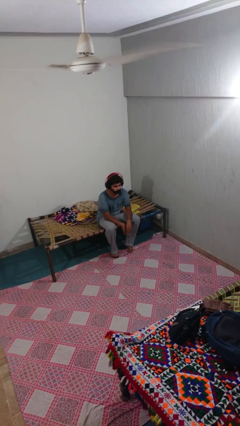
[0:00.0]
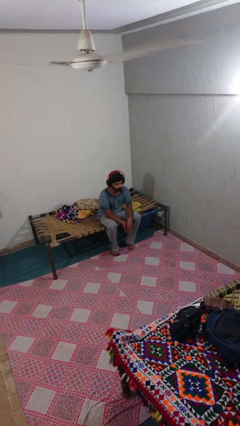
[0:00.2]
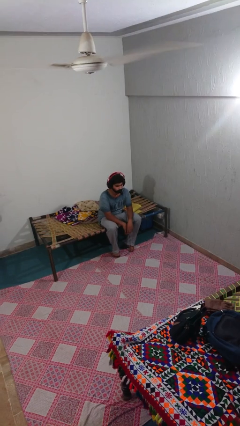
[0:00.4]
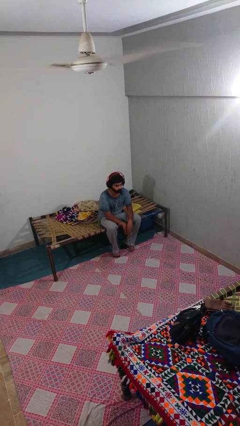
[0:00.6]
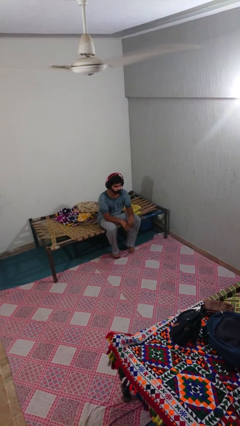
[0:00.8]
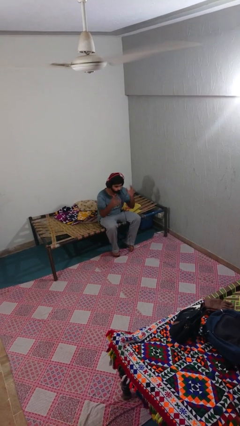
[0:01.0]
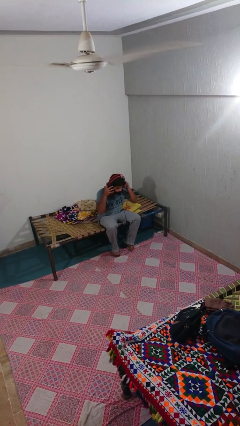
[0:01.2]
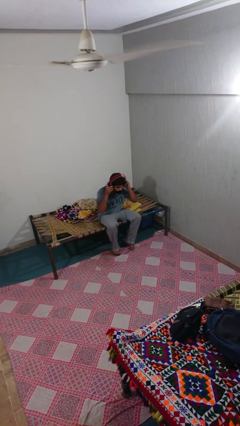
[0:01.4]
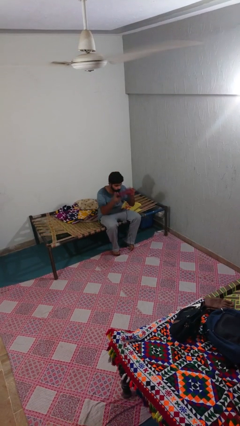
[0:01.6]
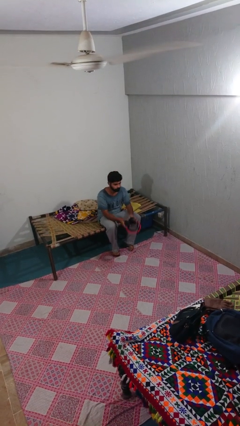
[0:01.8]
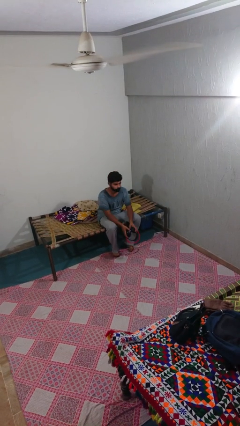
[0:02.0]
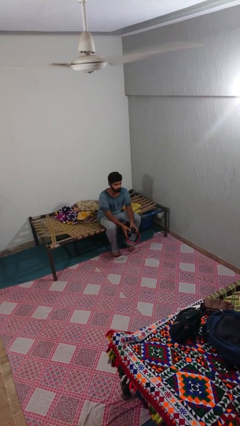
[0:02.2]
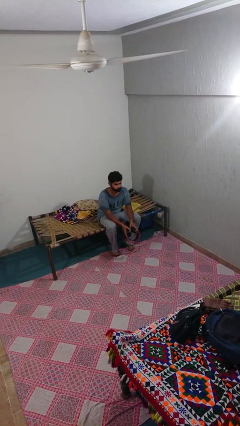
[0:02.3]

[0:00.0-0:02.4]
person takes off headphones

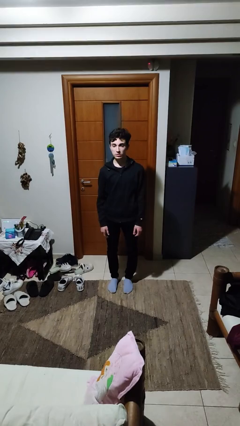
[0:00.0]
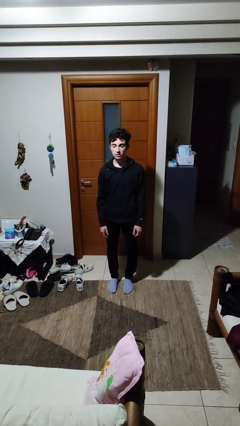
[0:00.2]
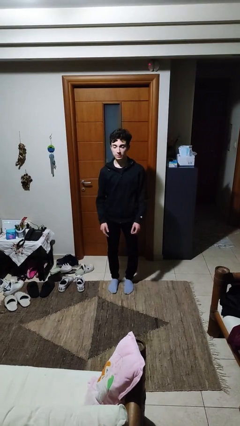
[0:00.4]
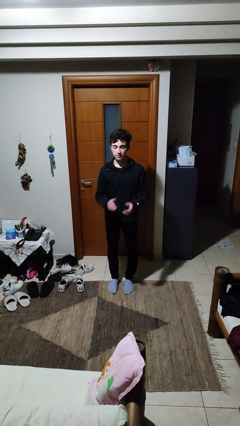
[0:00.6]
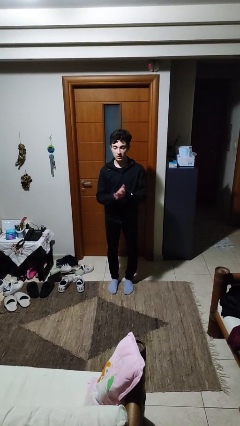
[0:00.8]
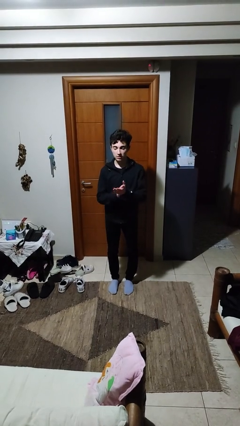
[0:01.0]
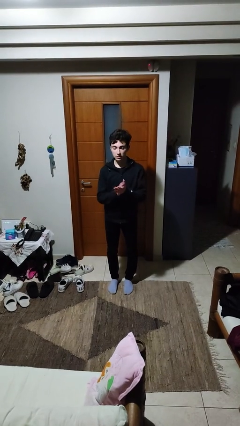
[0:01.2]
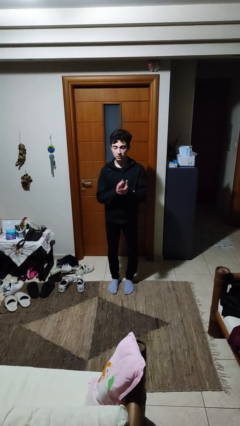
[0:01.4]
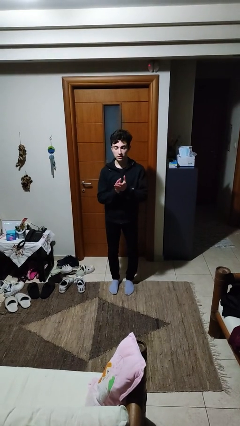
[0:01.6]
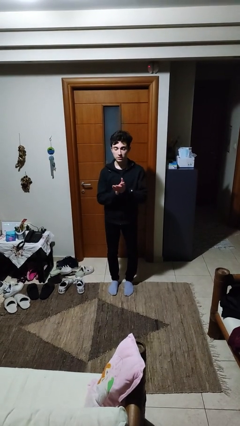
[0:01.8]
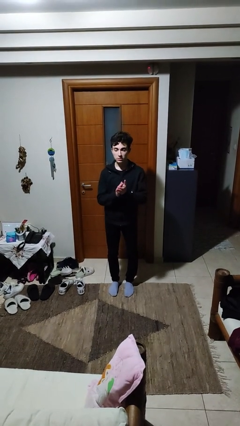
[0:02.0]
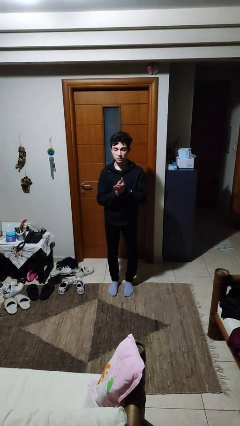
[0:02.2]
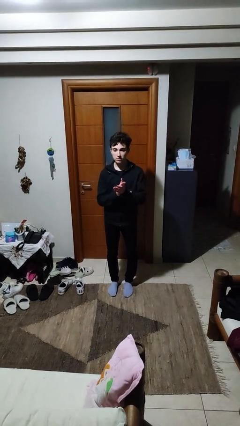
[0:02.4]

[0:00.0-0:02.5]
person claps hands

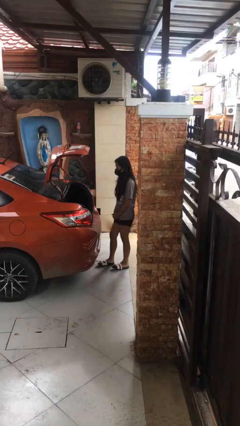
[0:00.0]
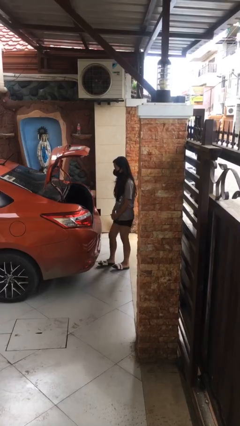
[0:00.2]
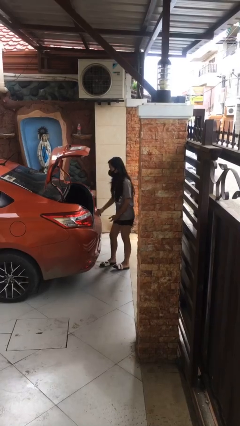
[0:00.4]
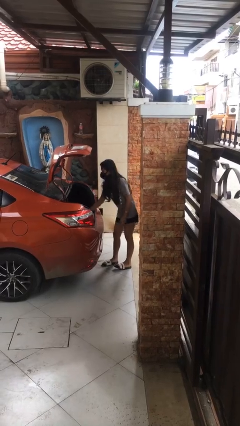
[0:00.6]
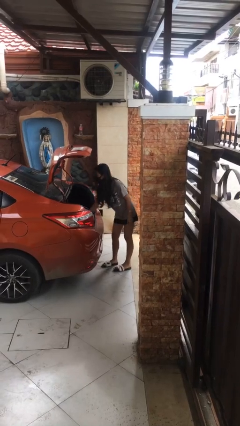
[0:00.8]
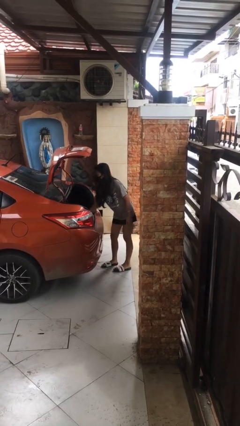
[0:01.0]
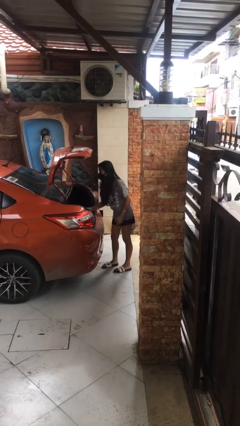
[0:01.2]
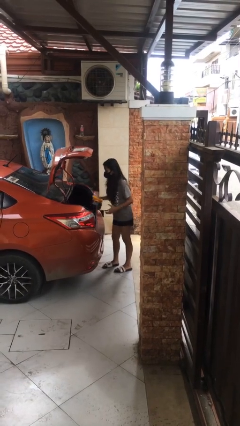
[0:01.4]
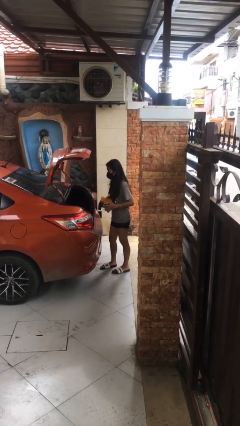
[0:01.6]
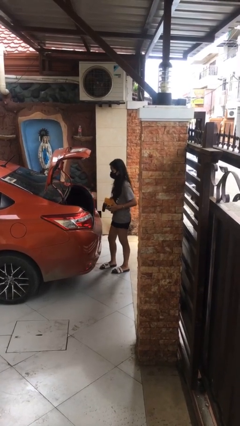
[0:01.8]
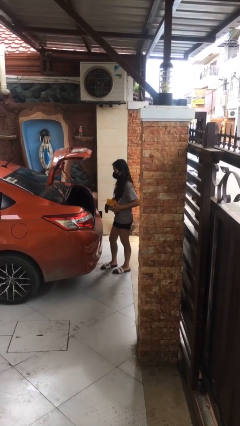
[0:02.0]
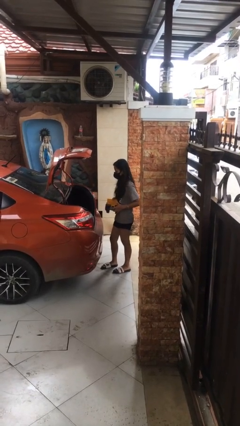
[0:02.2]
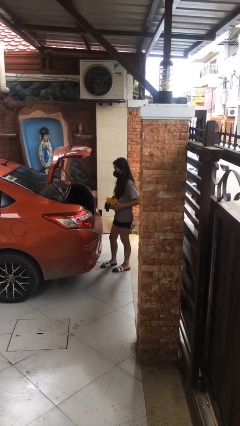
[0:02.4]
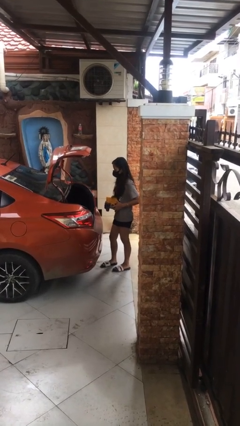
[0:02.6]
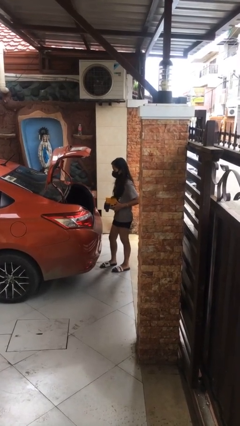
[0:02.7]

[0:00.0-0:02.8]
person unloads car

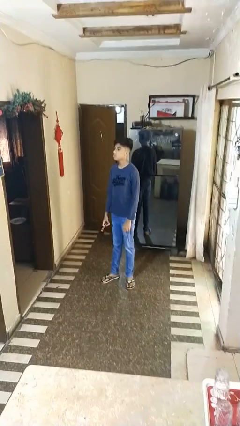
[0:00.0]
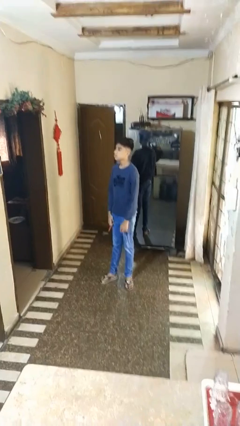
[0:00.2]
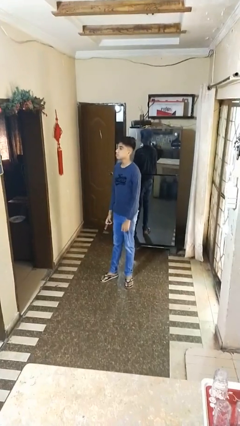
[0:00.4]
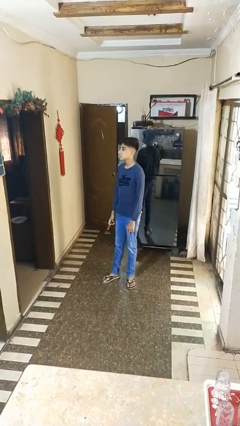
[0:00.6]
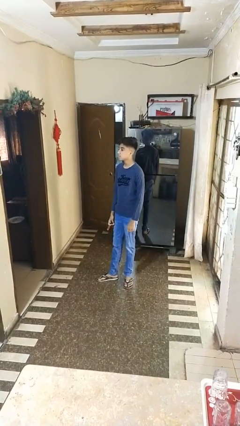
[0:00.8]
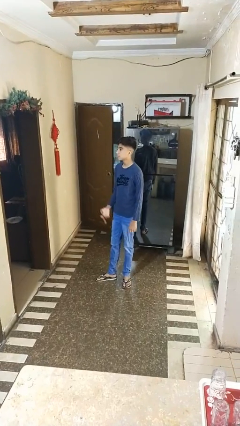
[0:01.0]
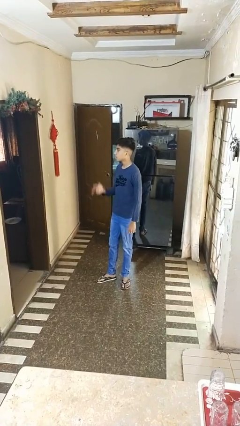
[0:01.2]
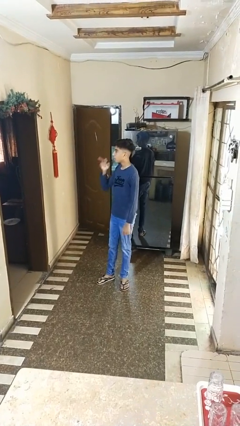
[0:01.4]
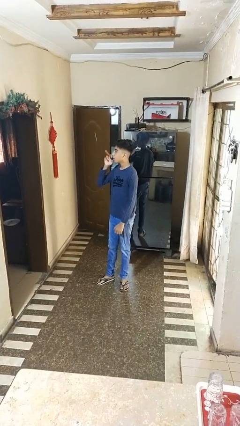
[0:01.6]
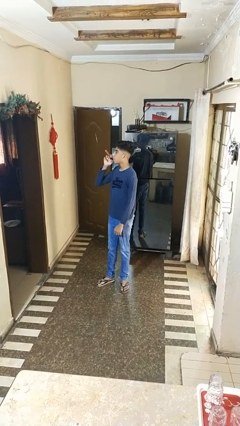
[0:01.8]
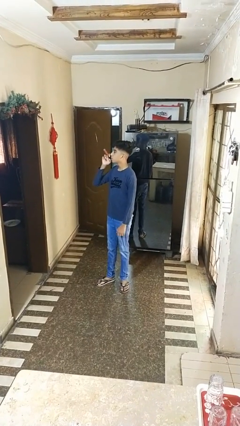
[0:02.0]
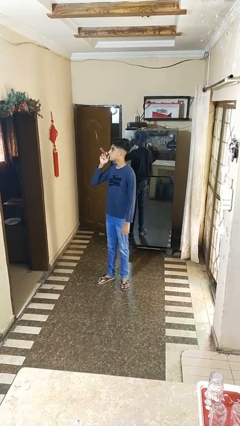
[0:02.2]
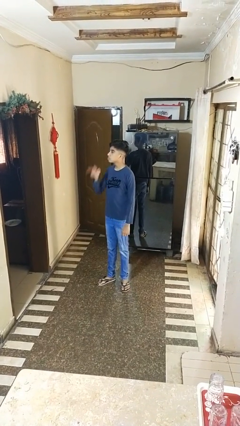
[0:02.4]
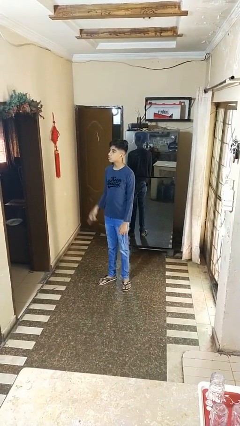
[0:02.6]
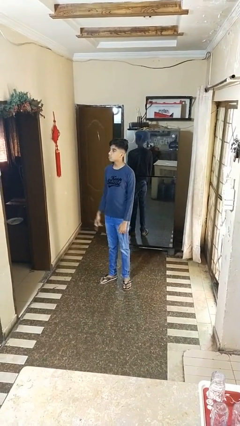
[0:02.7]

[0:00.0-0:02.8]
person vapes

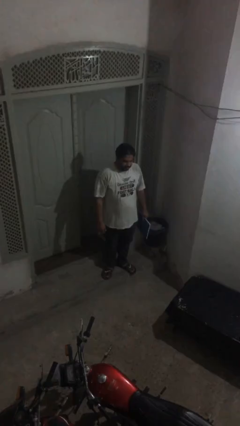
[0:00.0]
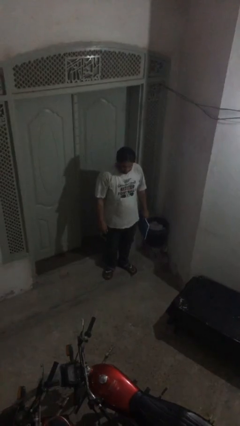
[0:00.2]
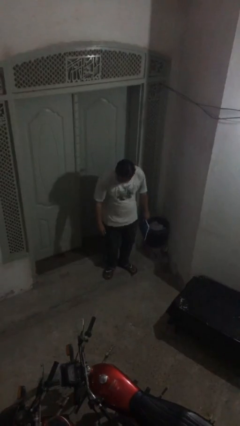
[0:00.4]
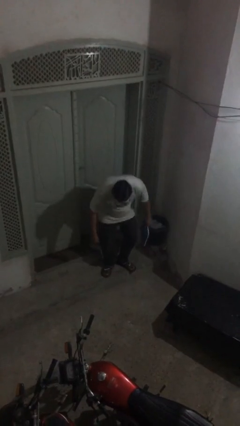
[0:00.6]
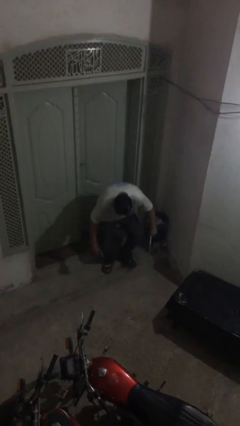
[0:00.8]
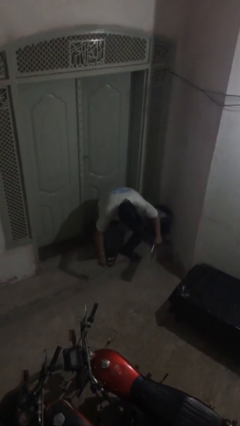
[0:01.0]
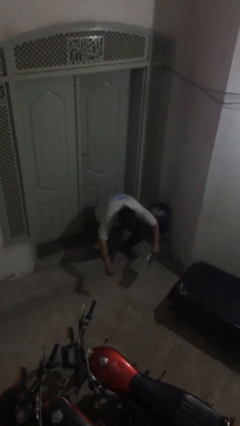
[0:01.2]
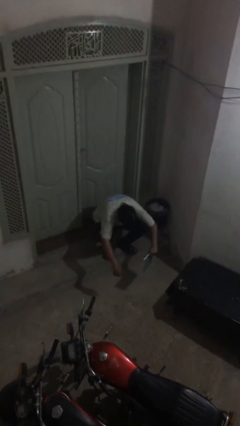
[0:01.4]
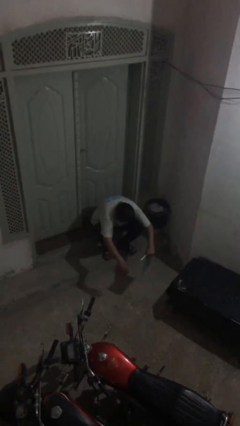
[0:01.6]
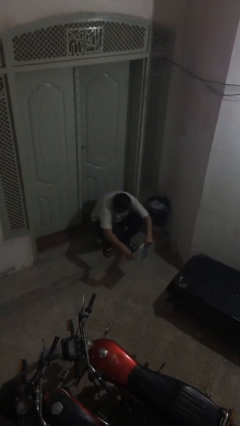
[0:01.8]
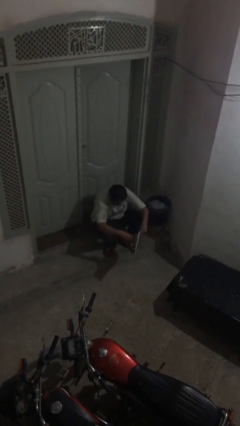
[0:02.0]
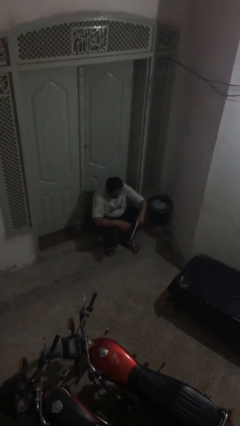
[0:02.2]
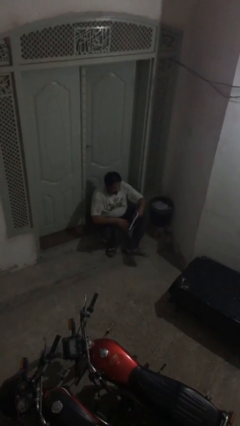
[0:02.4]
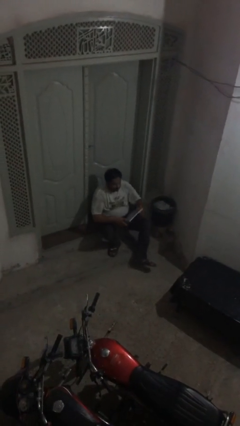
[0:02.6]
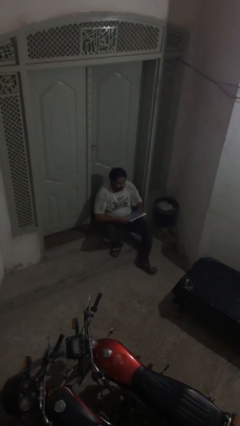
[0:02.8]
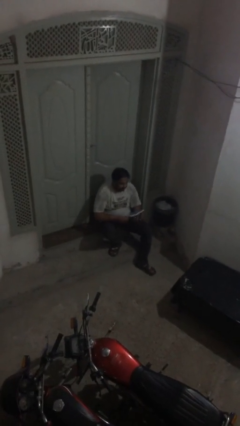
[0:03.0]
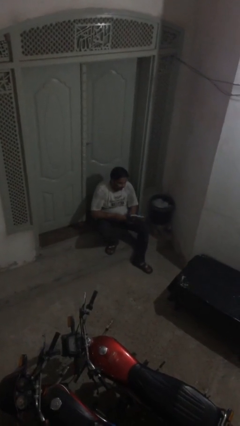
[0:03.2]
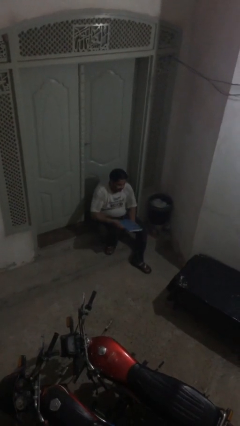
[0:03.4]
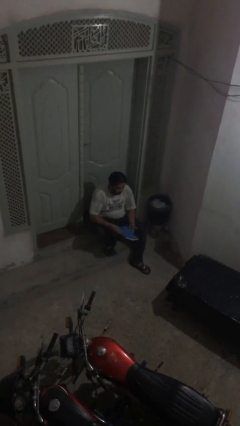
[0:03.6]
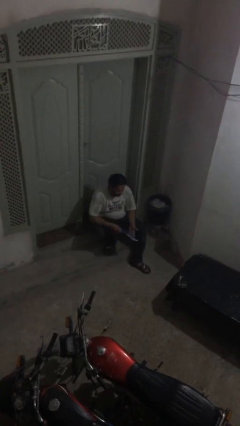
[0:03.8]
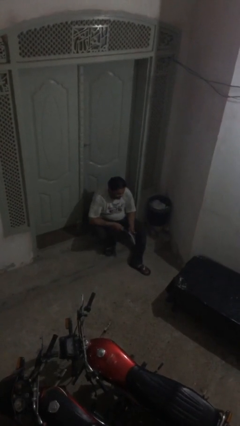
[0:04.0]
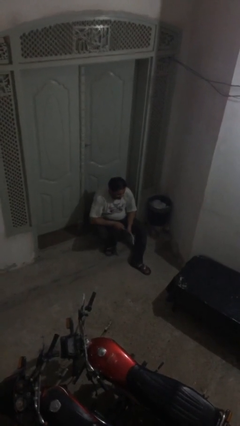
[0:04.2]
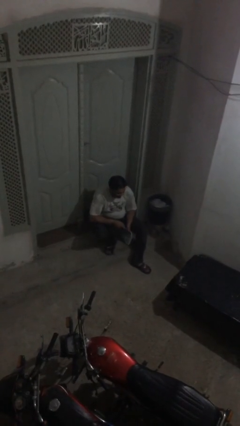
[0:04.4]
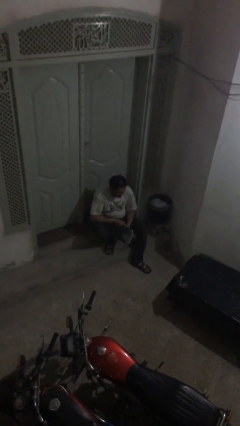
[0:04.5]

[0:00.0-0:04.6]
person sits down

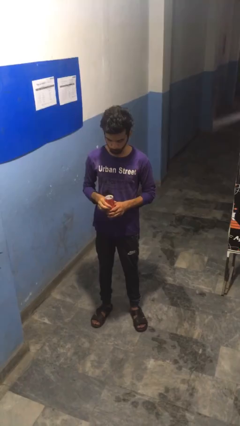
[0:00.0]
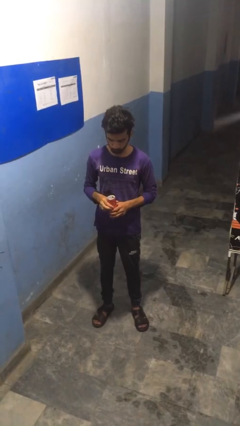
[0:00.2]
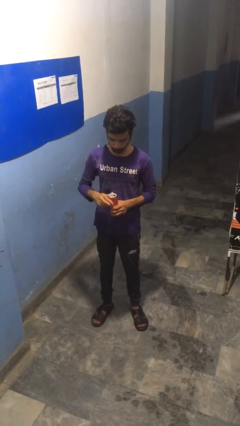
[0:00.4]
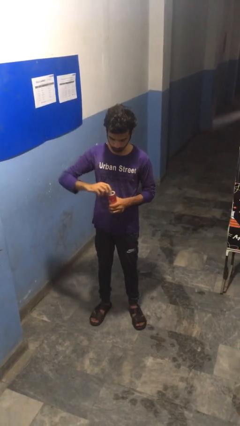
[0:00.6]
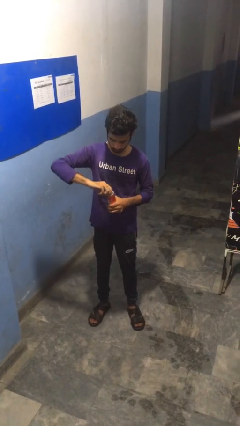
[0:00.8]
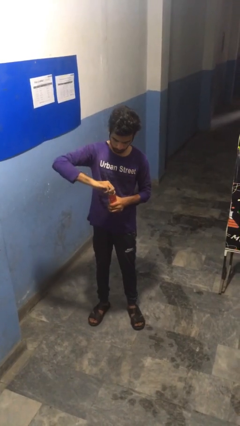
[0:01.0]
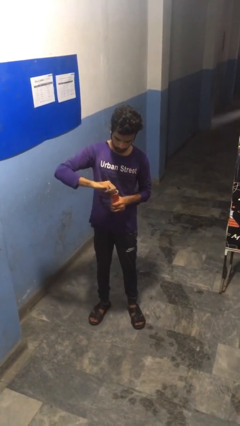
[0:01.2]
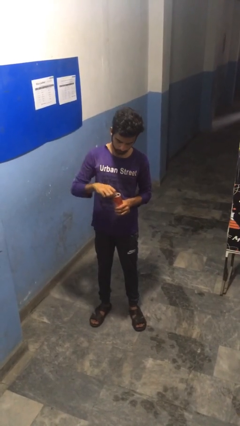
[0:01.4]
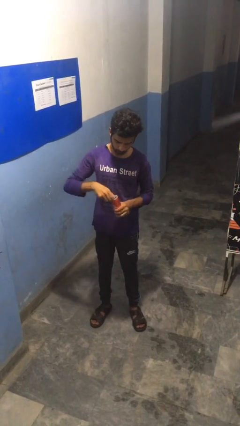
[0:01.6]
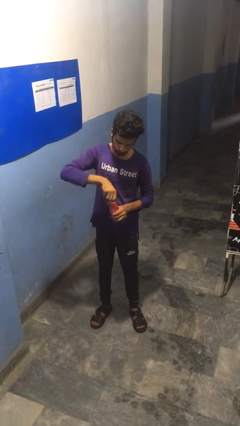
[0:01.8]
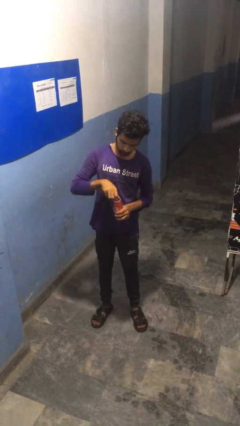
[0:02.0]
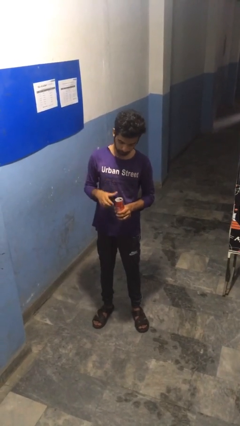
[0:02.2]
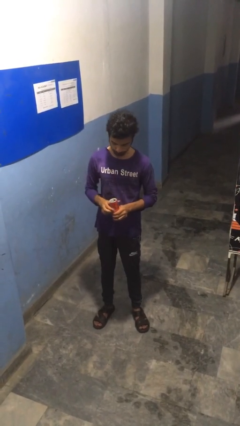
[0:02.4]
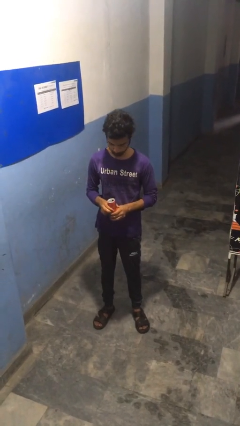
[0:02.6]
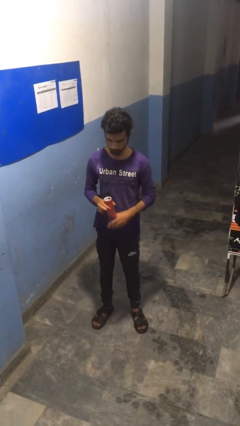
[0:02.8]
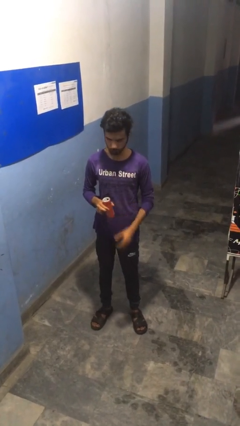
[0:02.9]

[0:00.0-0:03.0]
person opens beverage can
